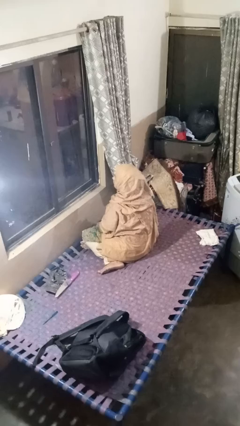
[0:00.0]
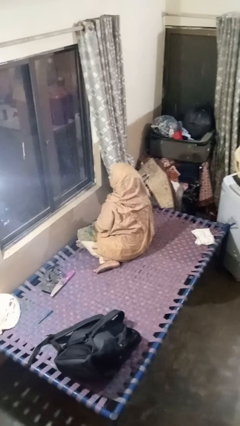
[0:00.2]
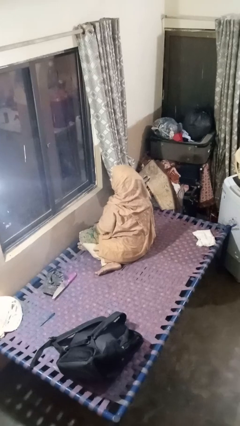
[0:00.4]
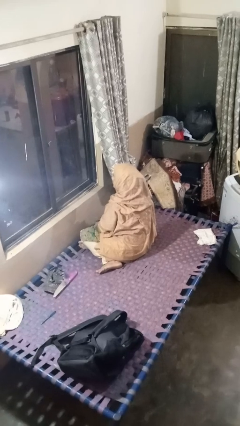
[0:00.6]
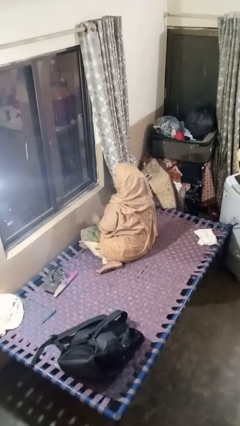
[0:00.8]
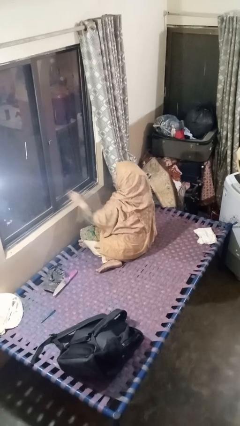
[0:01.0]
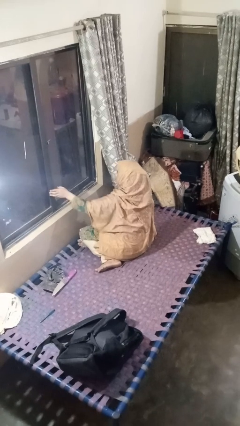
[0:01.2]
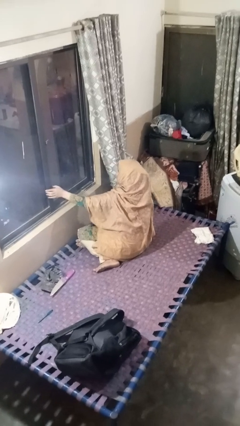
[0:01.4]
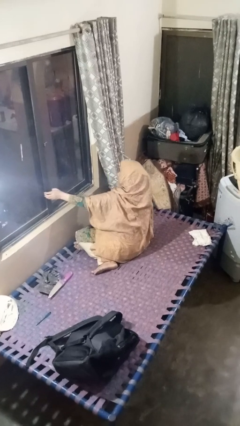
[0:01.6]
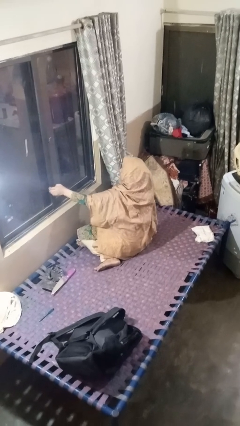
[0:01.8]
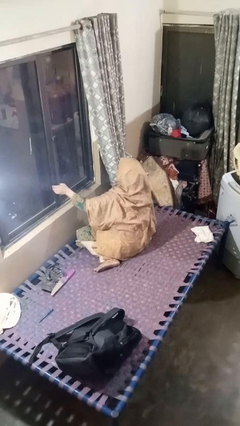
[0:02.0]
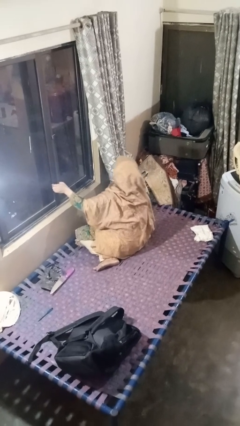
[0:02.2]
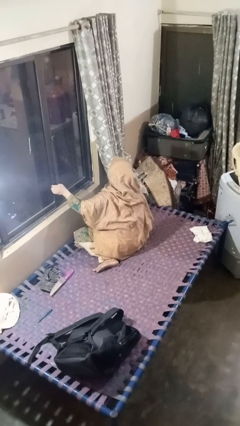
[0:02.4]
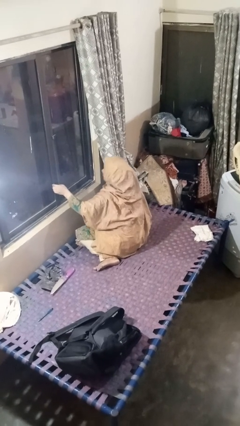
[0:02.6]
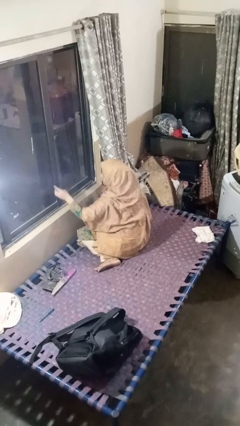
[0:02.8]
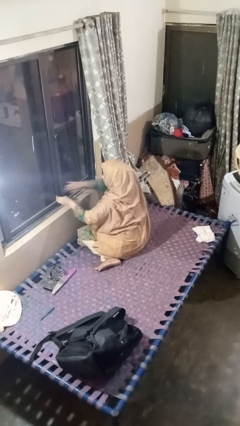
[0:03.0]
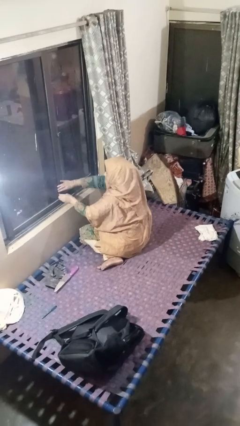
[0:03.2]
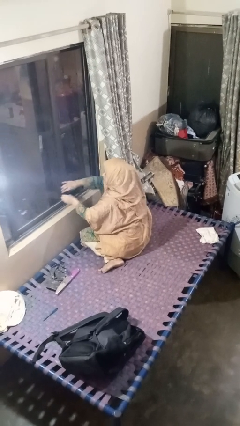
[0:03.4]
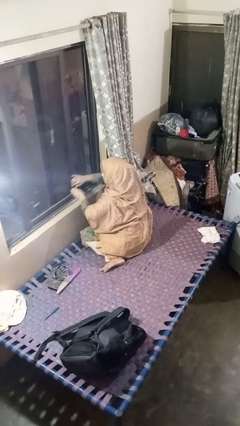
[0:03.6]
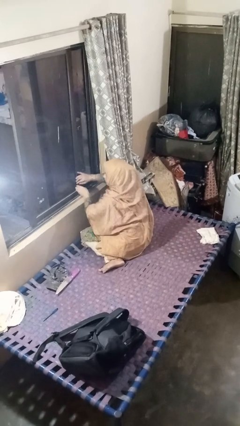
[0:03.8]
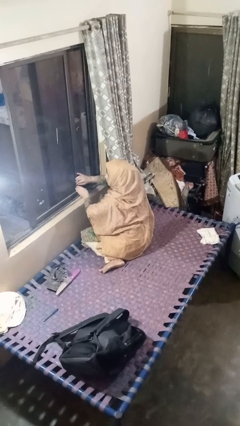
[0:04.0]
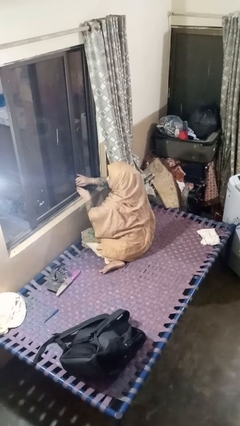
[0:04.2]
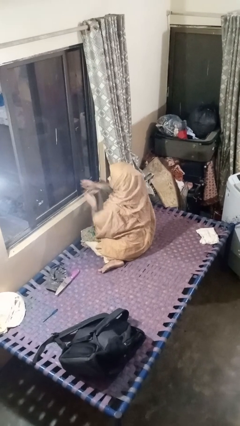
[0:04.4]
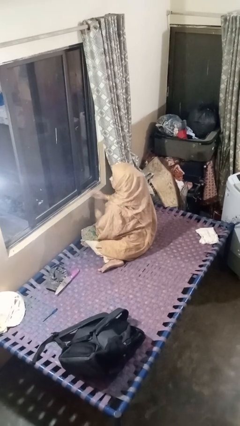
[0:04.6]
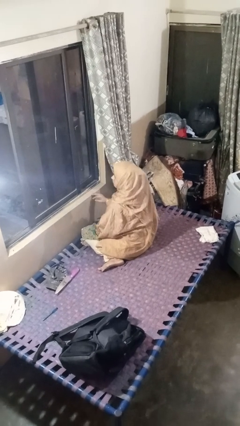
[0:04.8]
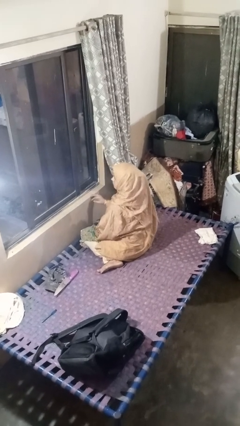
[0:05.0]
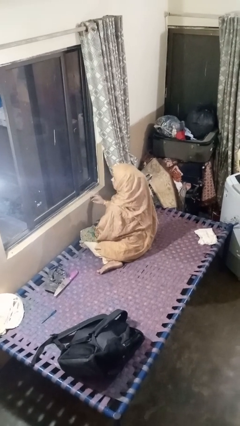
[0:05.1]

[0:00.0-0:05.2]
person opens home window

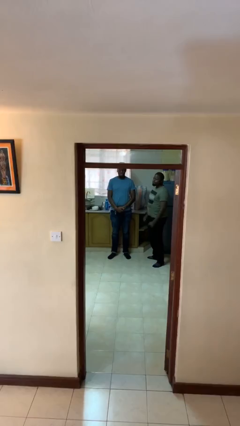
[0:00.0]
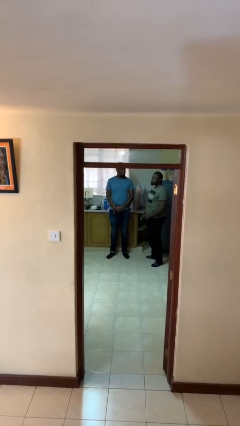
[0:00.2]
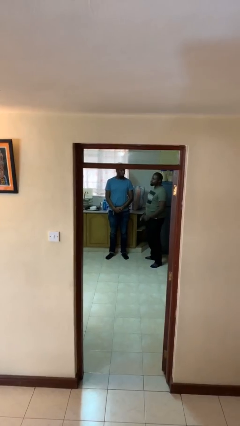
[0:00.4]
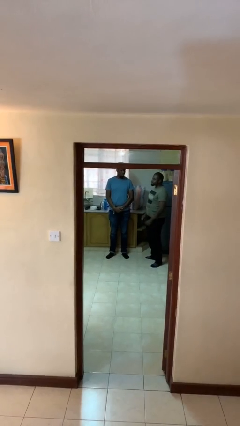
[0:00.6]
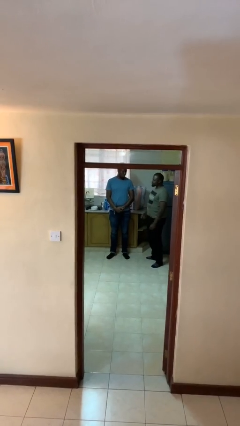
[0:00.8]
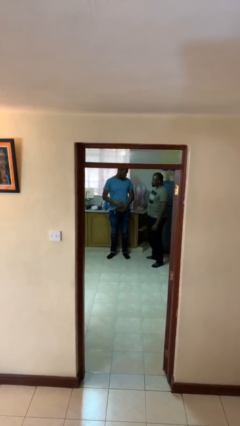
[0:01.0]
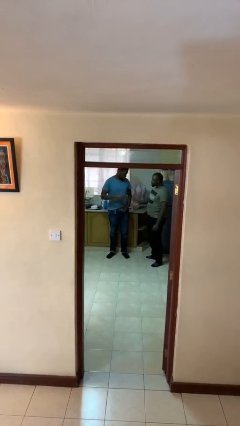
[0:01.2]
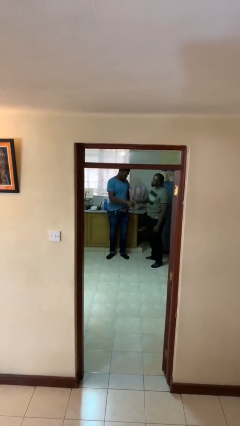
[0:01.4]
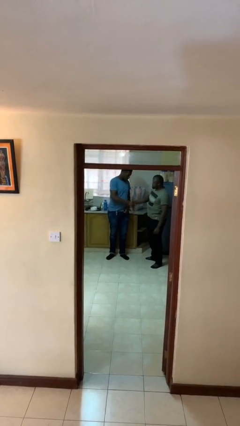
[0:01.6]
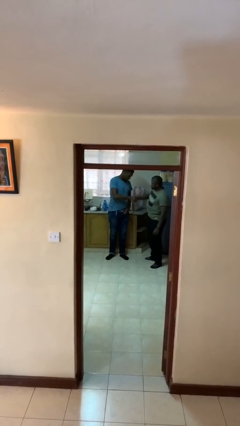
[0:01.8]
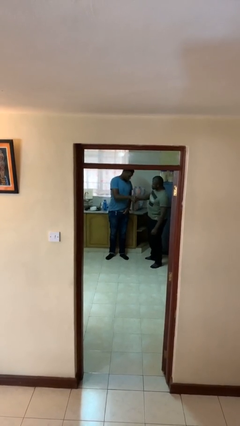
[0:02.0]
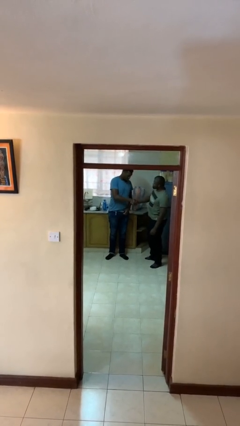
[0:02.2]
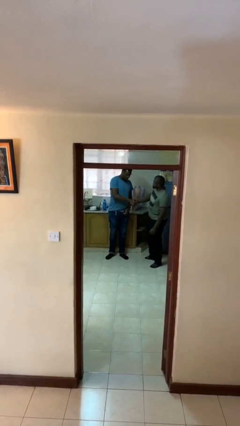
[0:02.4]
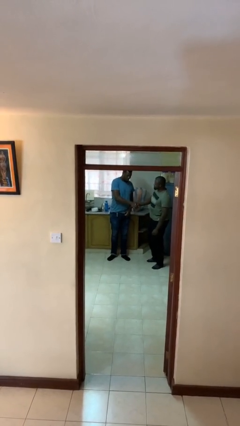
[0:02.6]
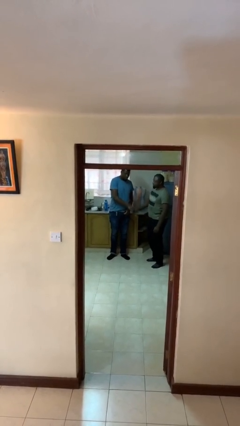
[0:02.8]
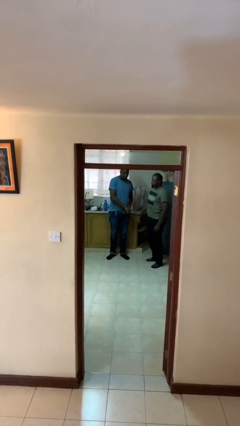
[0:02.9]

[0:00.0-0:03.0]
person shakes hand

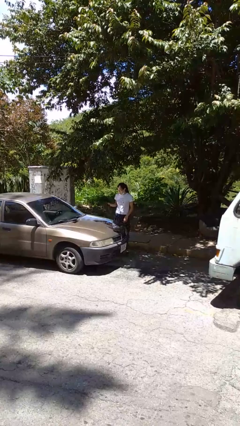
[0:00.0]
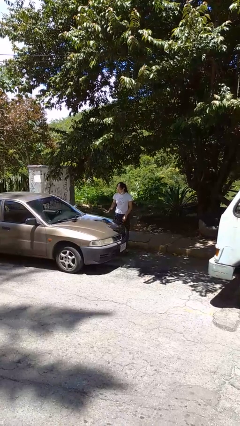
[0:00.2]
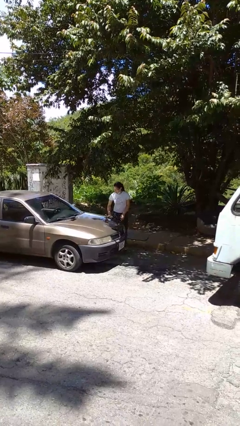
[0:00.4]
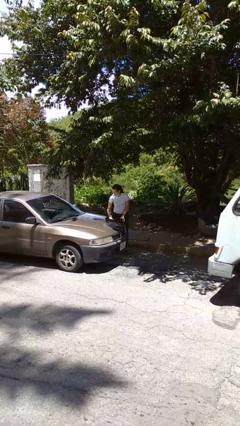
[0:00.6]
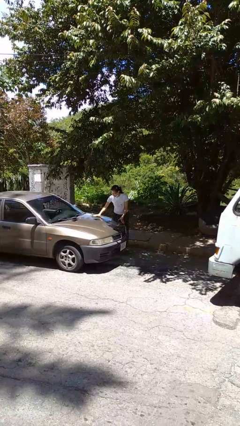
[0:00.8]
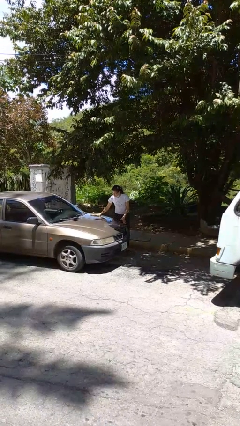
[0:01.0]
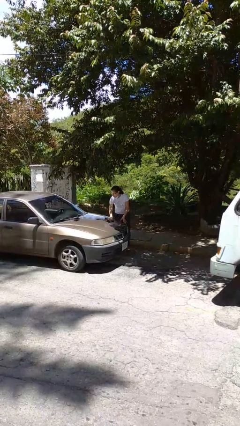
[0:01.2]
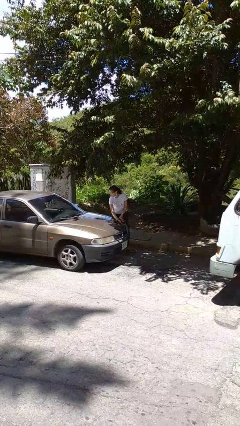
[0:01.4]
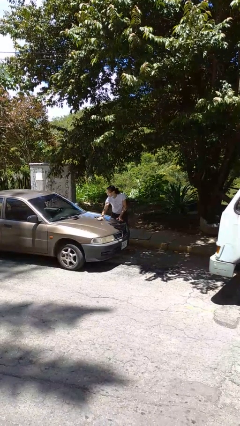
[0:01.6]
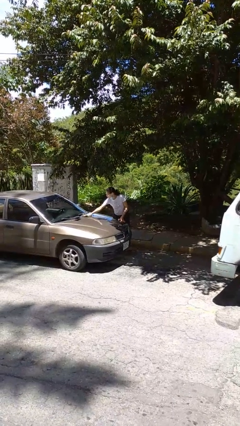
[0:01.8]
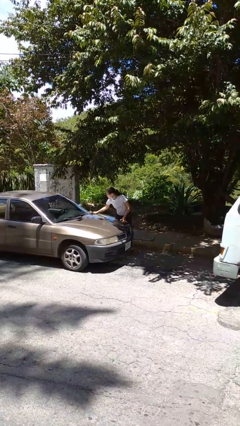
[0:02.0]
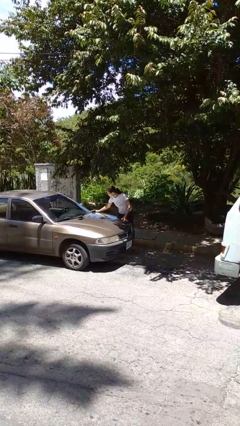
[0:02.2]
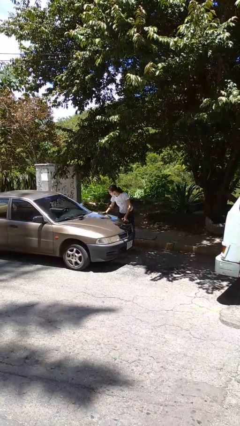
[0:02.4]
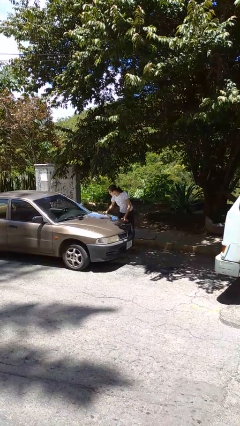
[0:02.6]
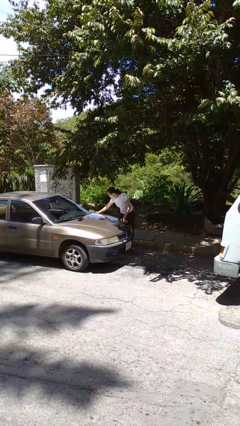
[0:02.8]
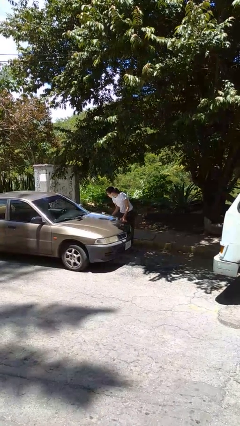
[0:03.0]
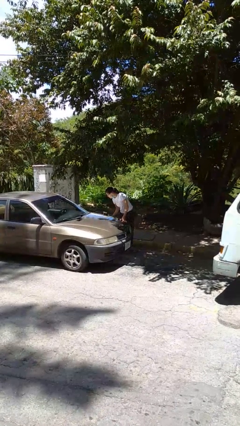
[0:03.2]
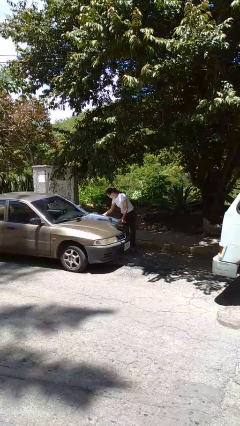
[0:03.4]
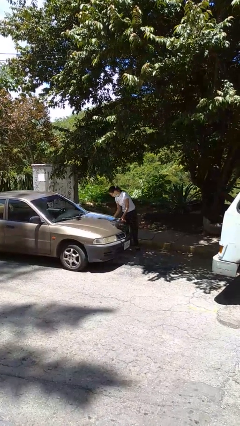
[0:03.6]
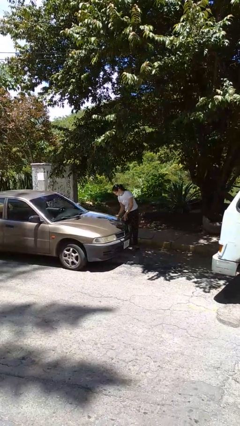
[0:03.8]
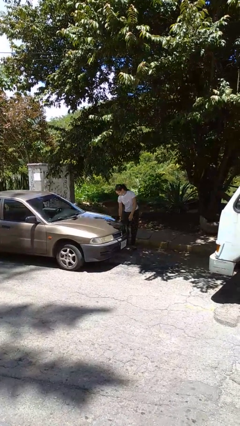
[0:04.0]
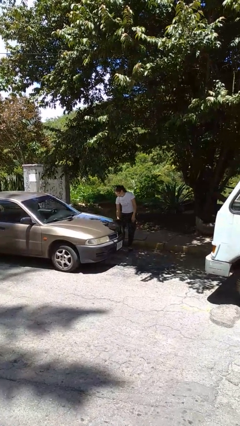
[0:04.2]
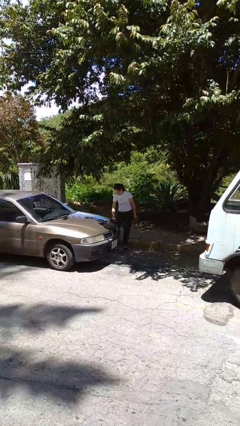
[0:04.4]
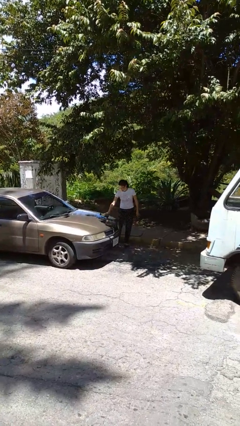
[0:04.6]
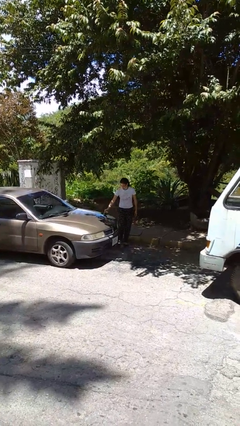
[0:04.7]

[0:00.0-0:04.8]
person polishes car with rag

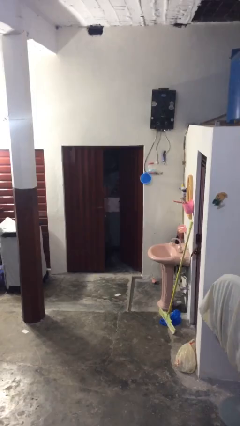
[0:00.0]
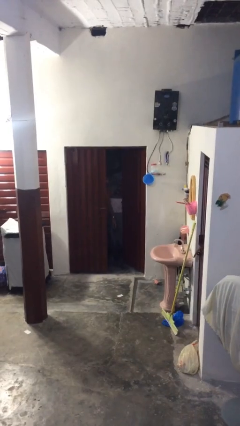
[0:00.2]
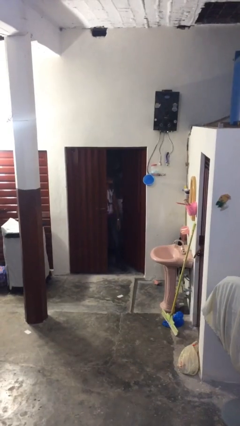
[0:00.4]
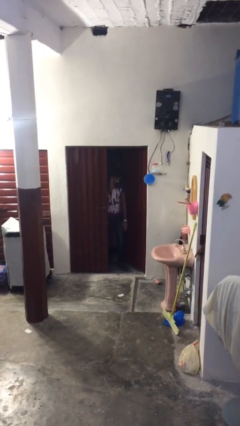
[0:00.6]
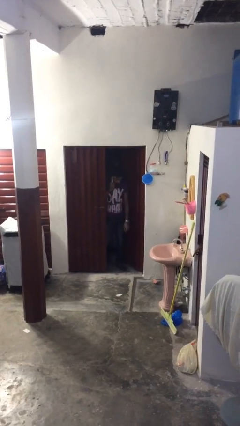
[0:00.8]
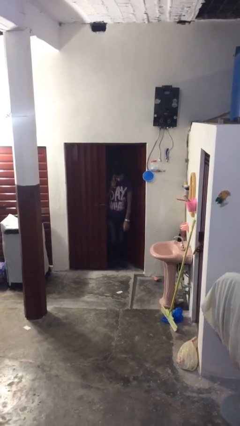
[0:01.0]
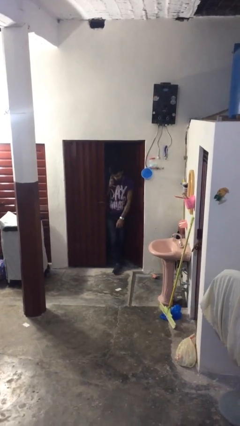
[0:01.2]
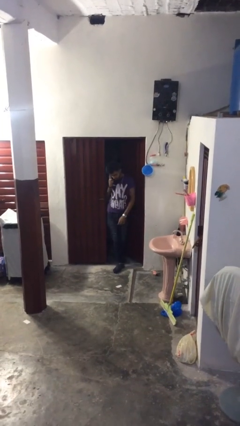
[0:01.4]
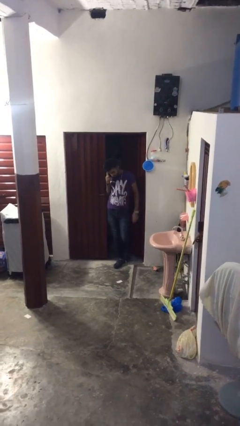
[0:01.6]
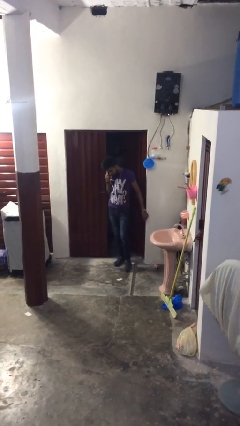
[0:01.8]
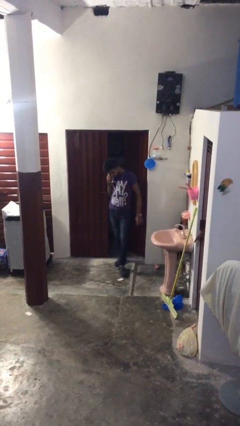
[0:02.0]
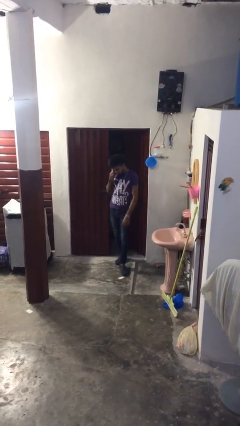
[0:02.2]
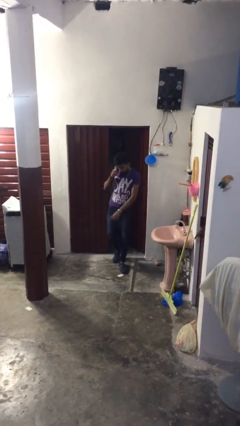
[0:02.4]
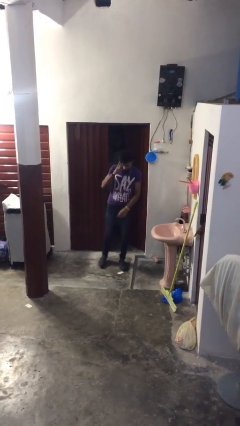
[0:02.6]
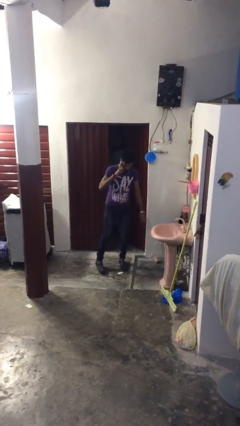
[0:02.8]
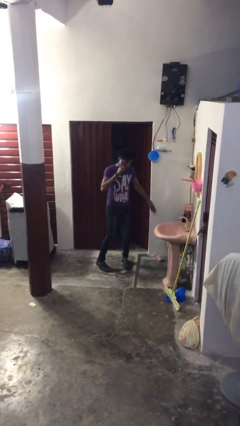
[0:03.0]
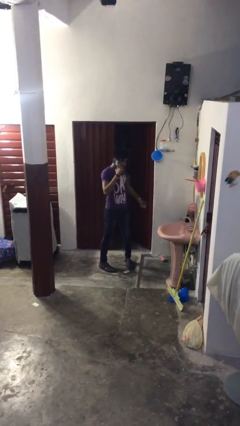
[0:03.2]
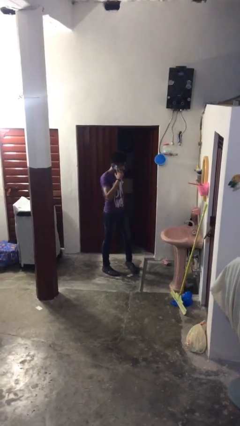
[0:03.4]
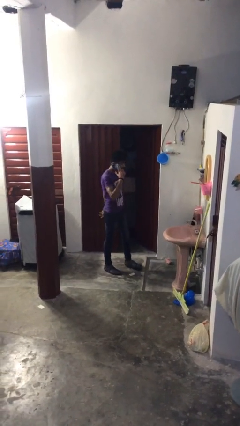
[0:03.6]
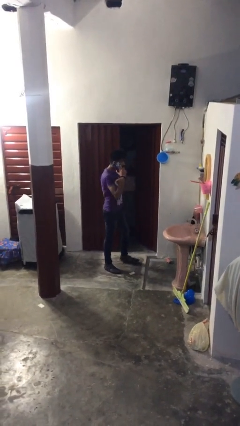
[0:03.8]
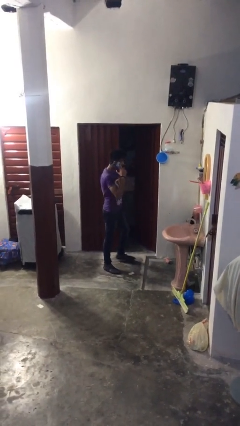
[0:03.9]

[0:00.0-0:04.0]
person enters scene through structure

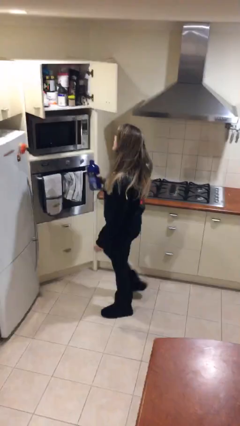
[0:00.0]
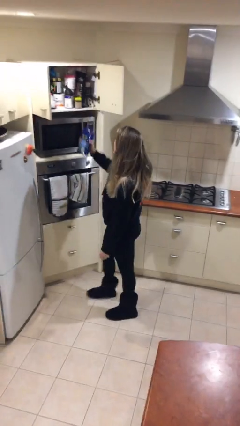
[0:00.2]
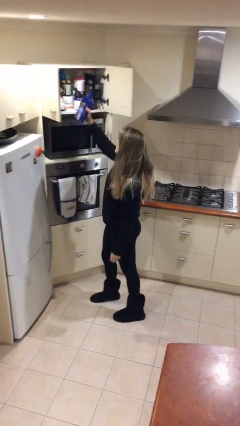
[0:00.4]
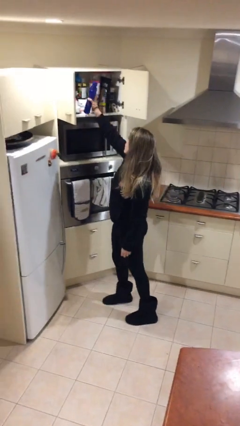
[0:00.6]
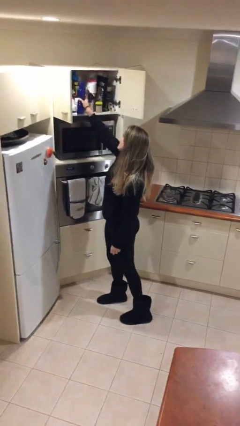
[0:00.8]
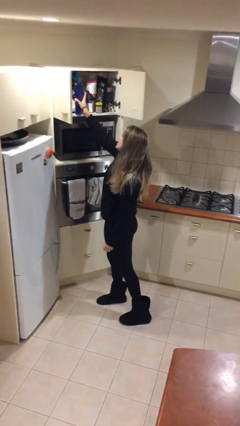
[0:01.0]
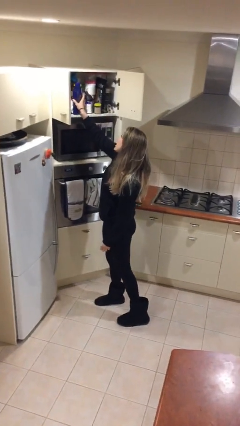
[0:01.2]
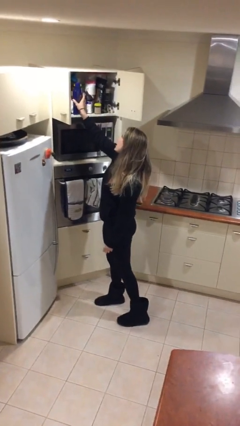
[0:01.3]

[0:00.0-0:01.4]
person puts down object on shelf
